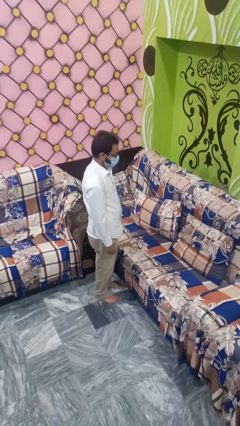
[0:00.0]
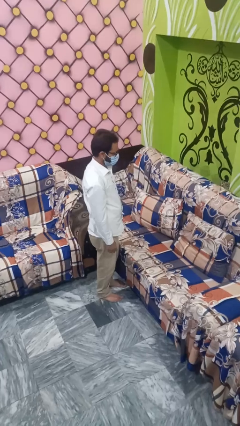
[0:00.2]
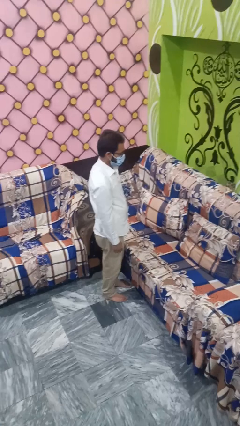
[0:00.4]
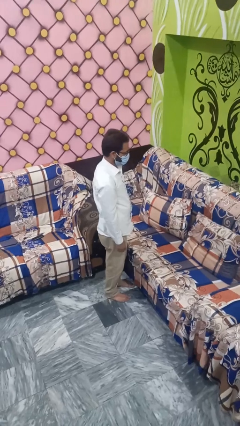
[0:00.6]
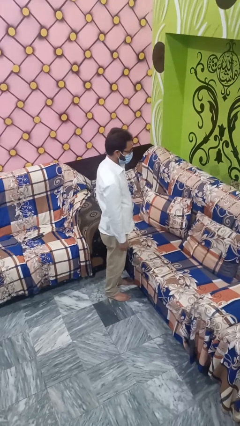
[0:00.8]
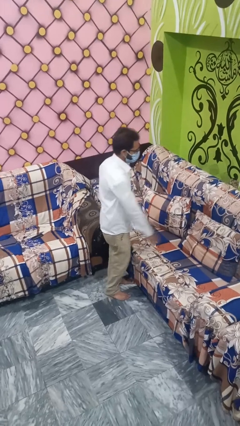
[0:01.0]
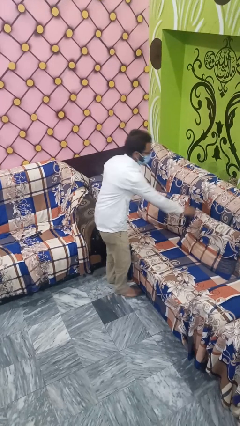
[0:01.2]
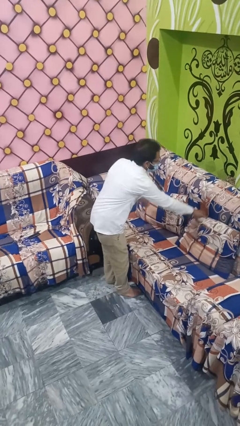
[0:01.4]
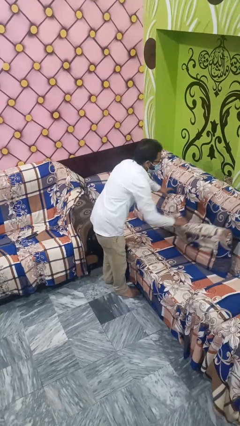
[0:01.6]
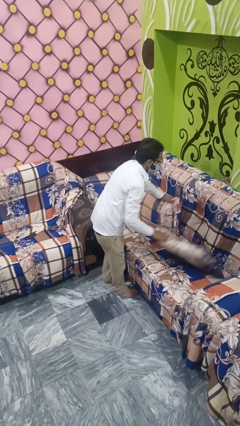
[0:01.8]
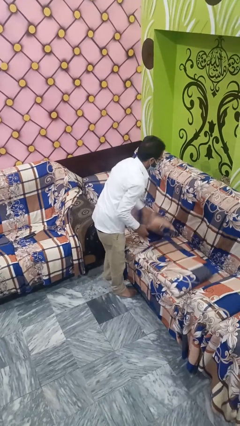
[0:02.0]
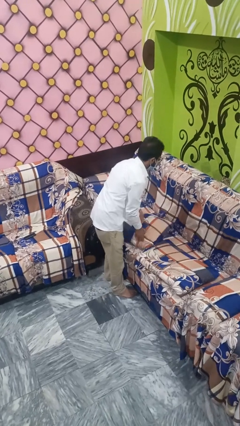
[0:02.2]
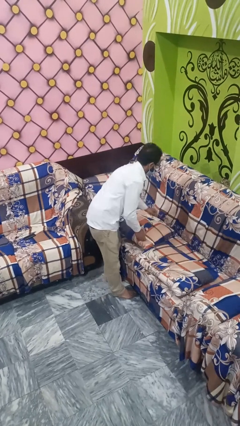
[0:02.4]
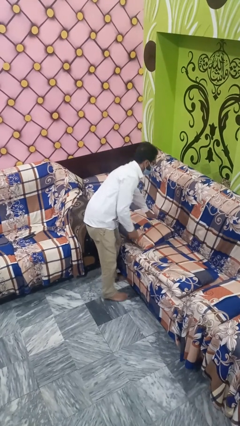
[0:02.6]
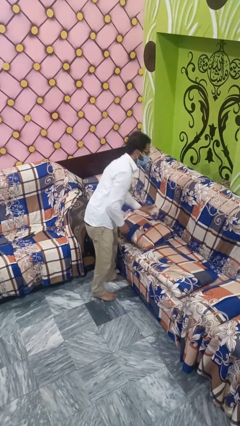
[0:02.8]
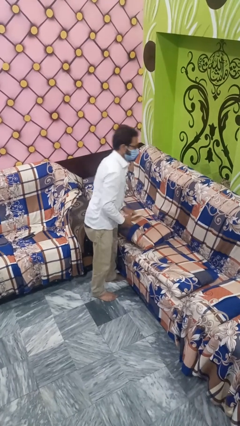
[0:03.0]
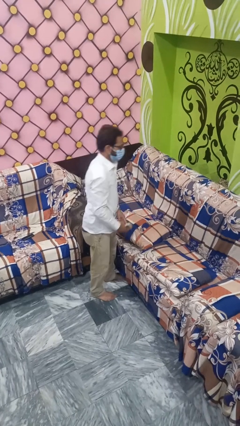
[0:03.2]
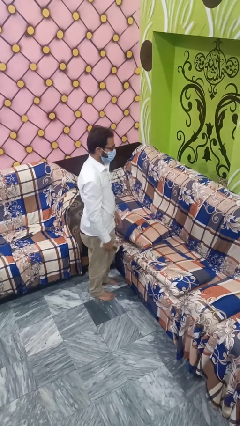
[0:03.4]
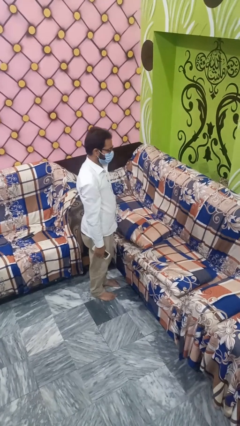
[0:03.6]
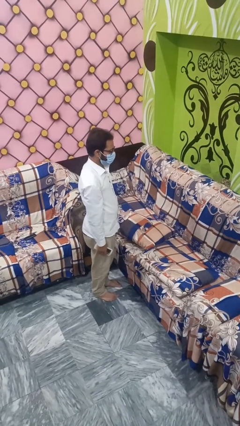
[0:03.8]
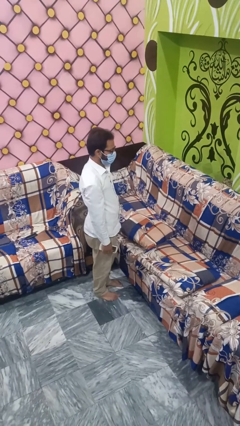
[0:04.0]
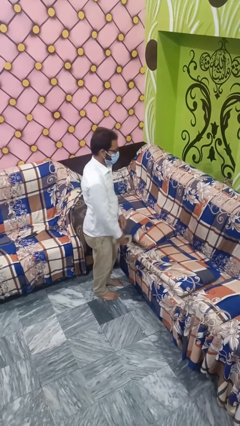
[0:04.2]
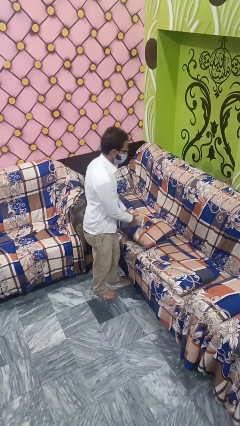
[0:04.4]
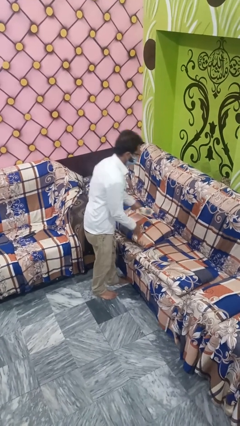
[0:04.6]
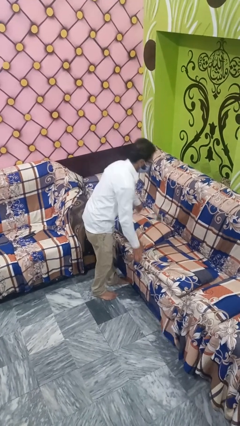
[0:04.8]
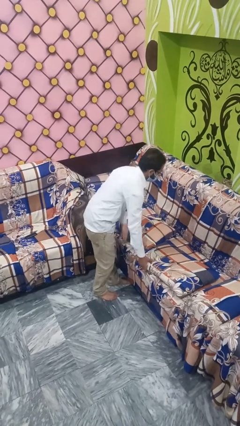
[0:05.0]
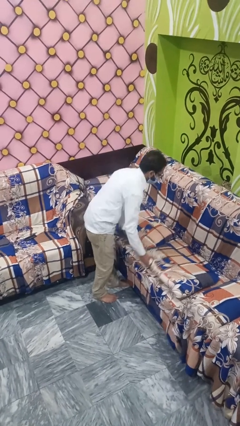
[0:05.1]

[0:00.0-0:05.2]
person searches in couch

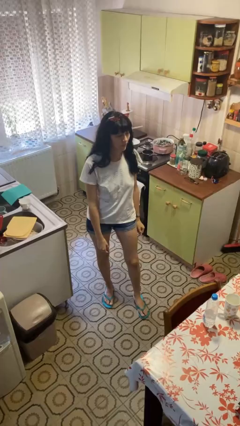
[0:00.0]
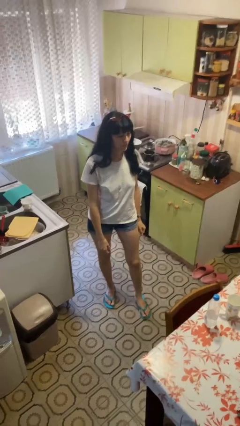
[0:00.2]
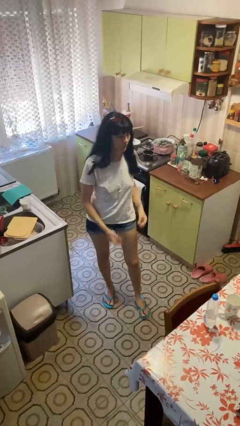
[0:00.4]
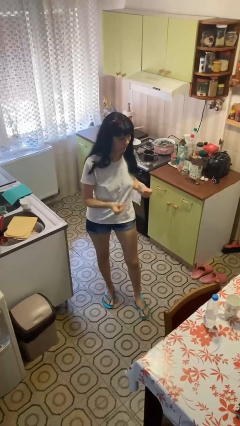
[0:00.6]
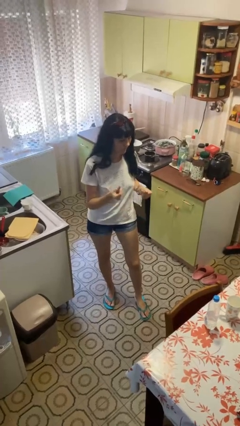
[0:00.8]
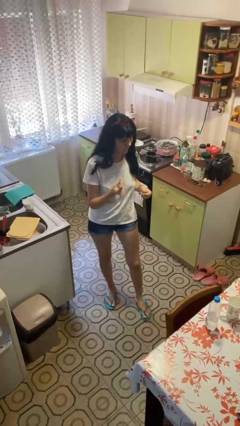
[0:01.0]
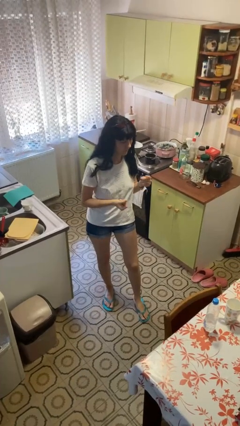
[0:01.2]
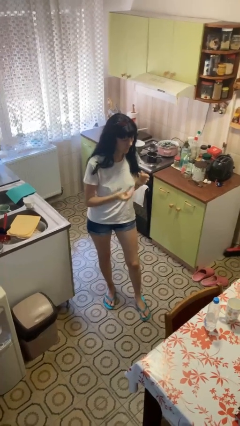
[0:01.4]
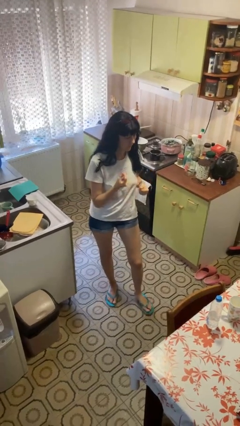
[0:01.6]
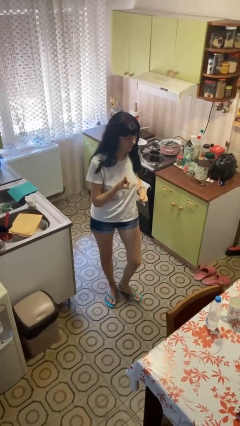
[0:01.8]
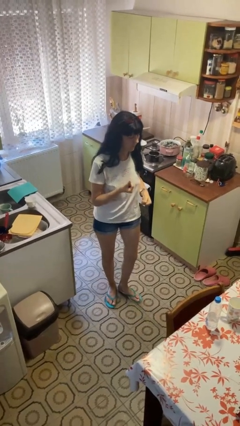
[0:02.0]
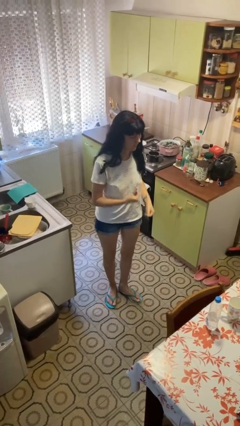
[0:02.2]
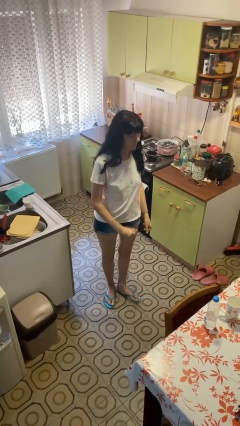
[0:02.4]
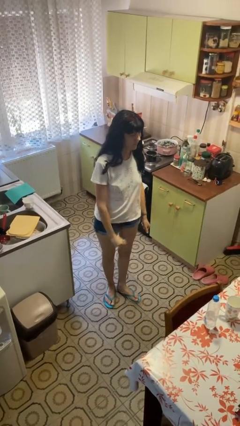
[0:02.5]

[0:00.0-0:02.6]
person snaps fingers

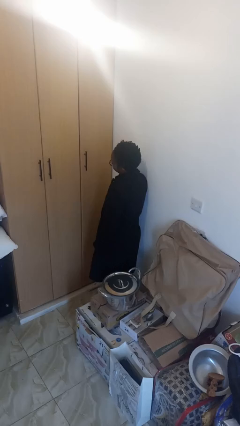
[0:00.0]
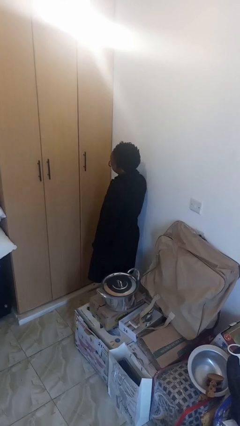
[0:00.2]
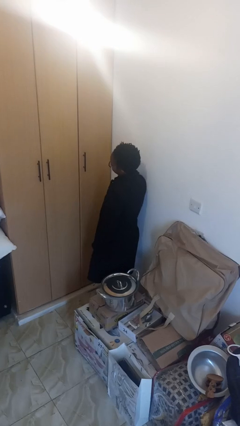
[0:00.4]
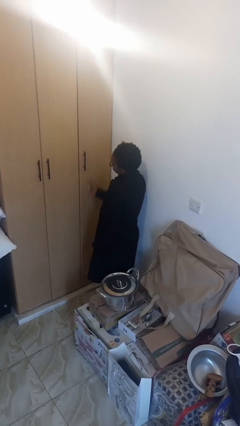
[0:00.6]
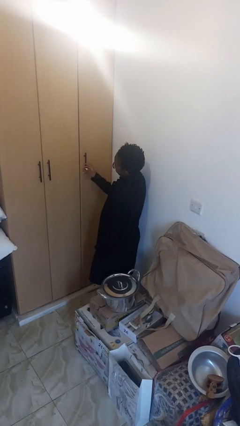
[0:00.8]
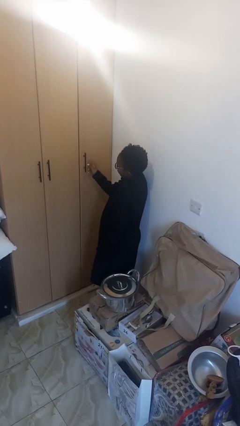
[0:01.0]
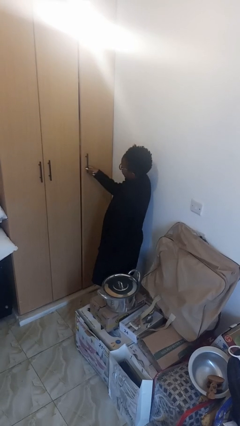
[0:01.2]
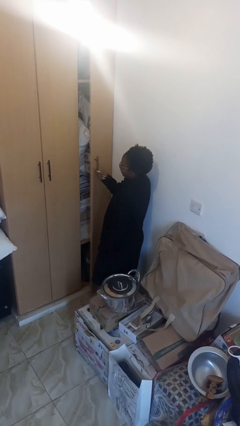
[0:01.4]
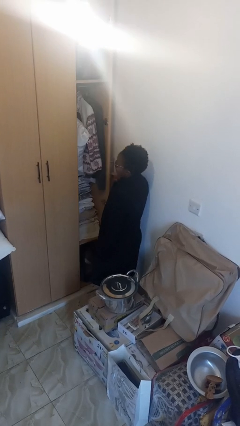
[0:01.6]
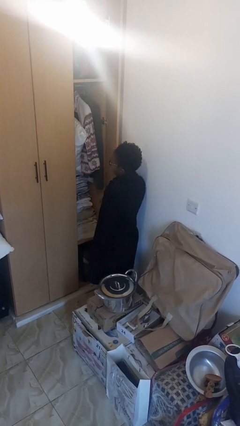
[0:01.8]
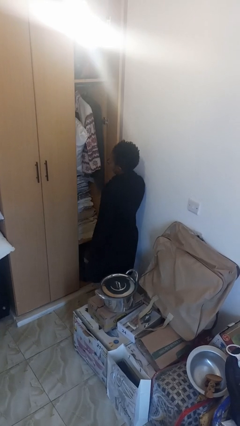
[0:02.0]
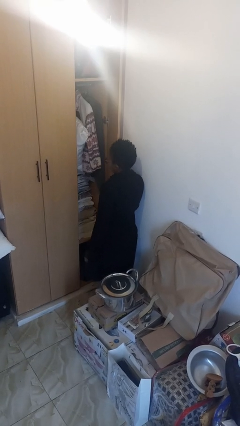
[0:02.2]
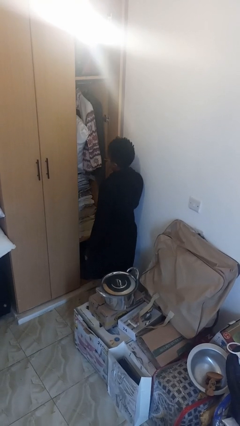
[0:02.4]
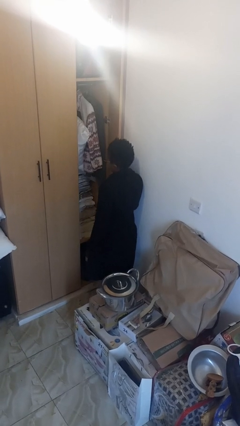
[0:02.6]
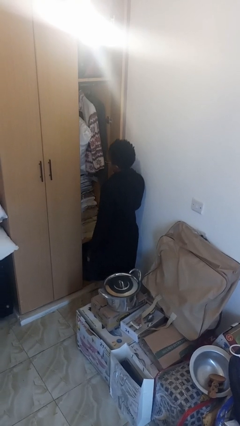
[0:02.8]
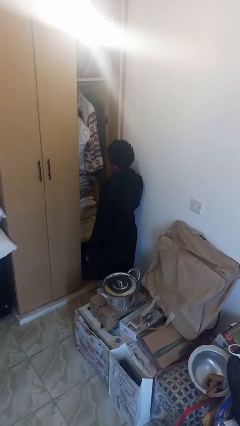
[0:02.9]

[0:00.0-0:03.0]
person opens closet door

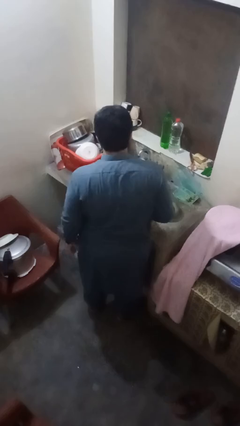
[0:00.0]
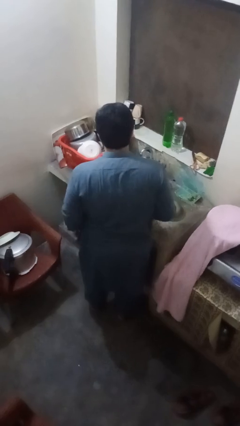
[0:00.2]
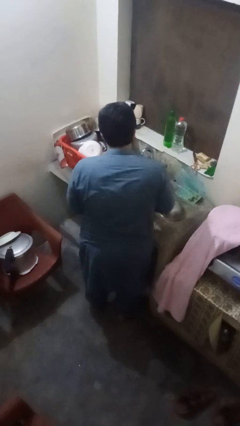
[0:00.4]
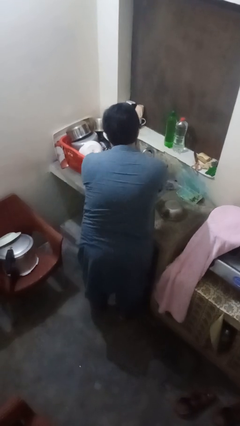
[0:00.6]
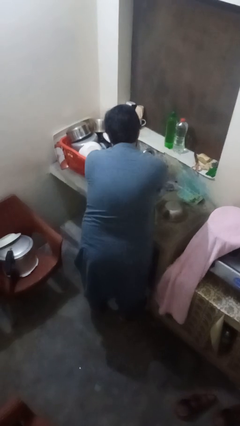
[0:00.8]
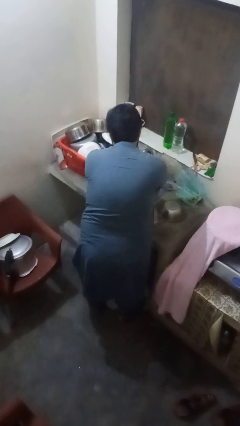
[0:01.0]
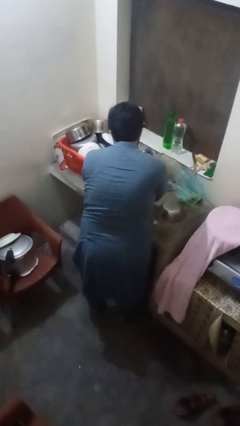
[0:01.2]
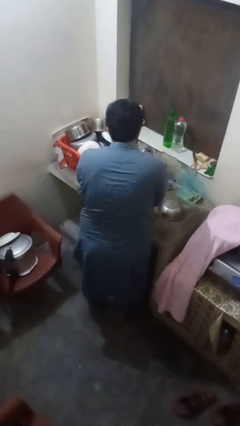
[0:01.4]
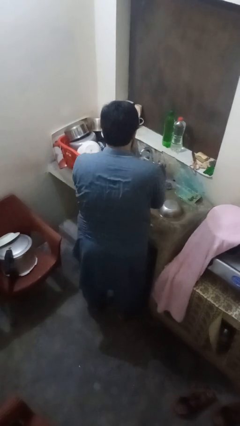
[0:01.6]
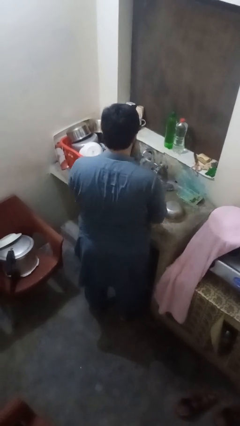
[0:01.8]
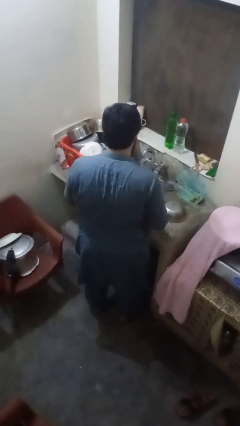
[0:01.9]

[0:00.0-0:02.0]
person washes hands

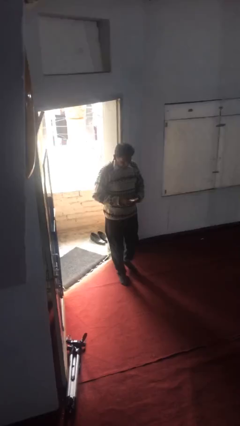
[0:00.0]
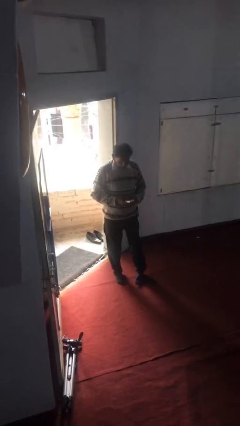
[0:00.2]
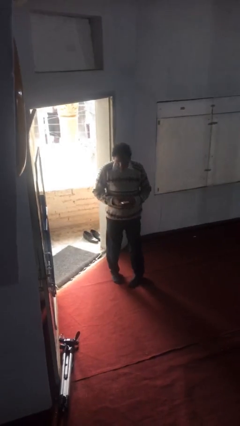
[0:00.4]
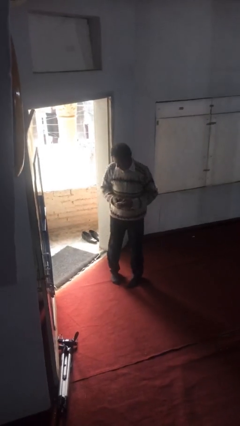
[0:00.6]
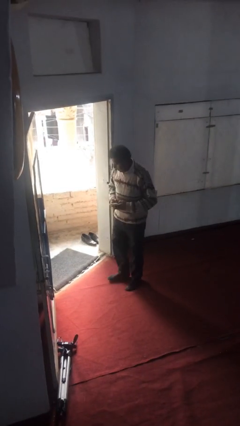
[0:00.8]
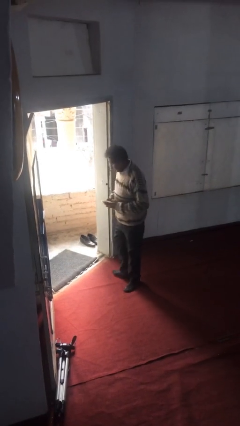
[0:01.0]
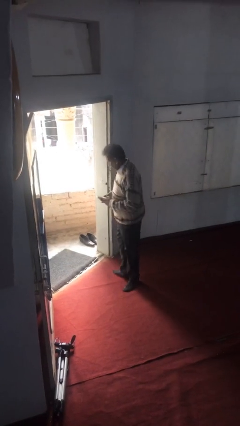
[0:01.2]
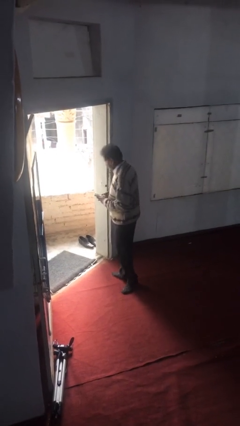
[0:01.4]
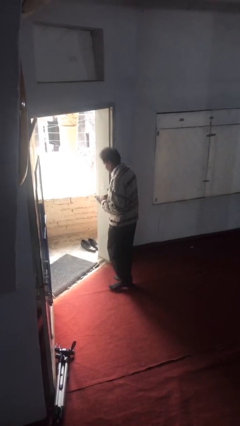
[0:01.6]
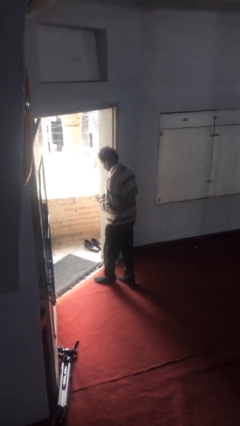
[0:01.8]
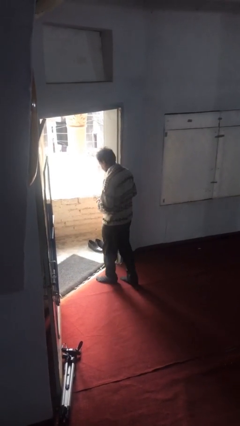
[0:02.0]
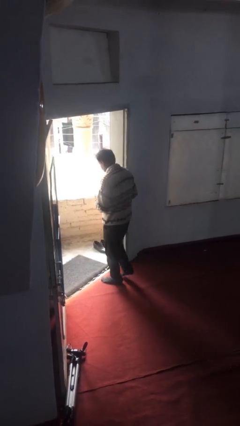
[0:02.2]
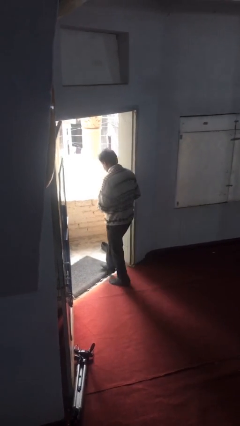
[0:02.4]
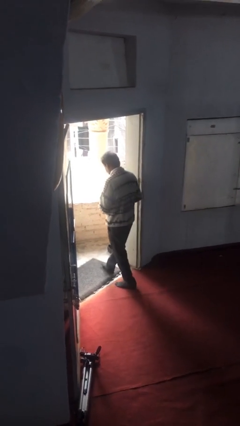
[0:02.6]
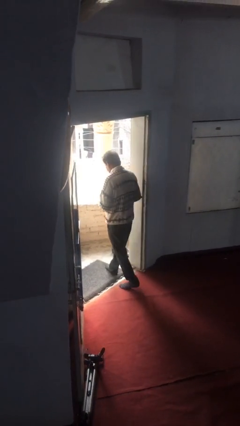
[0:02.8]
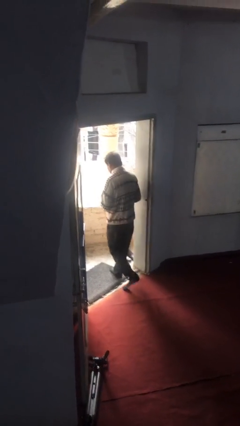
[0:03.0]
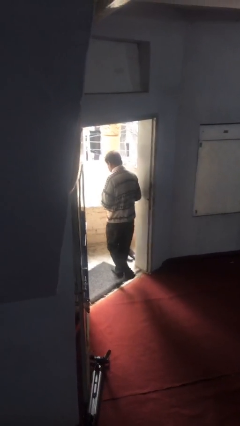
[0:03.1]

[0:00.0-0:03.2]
person exits scene through structure

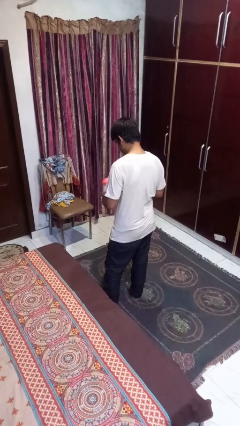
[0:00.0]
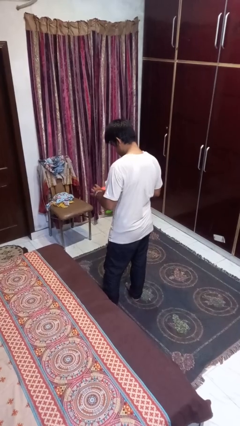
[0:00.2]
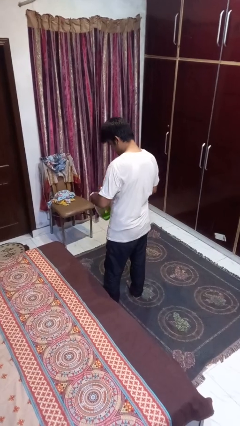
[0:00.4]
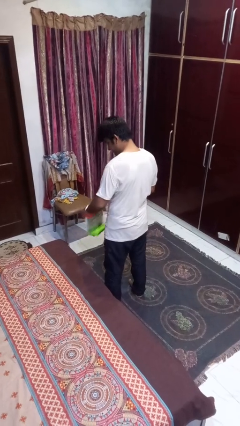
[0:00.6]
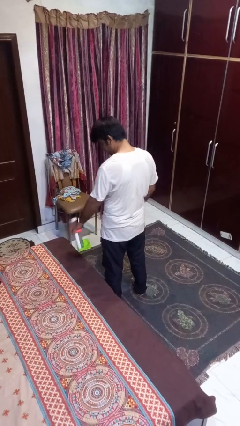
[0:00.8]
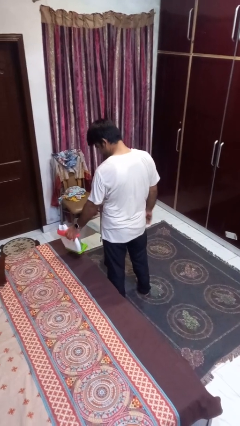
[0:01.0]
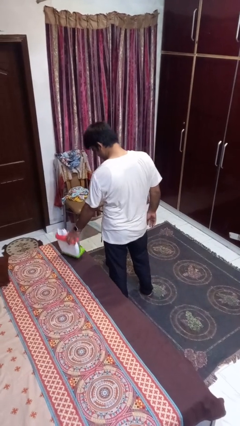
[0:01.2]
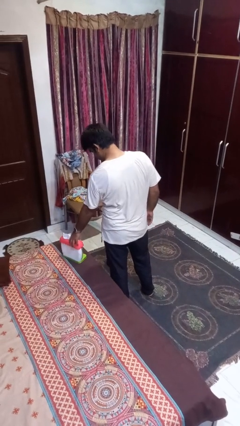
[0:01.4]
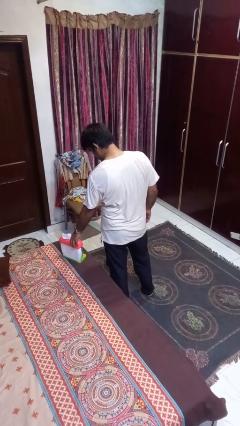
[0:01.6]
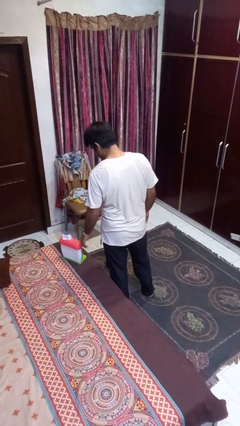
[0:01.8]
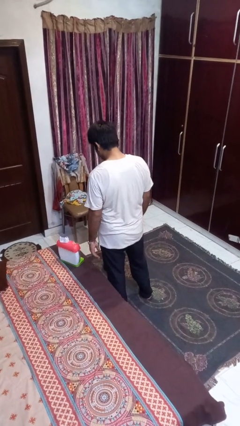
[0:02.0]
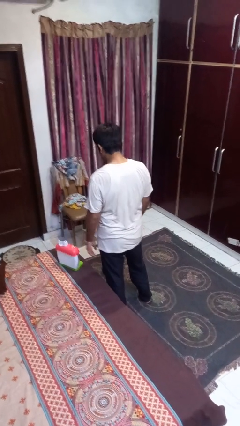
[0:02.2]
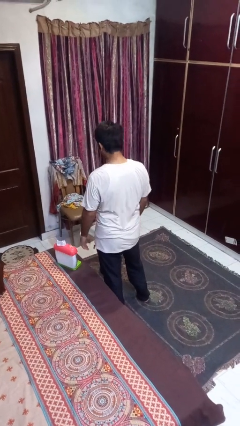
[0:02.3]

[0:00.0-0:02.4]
person puts down object on bed
